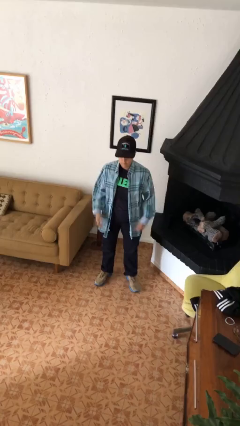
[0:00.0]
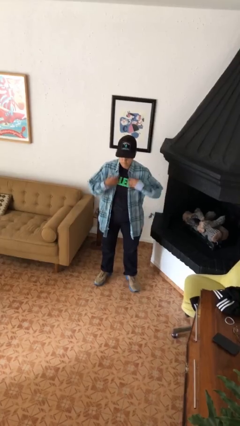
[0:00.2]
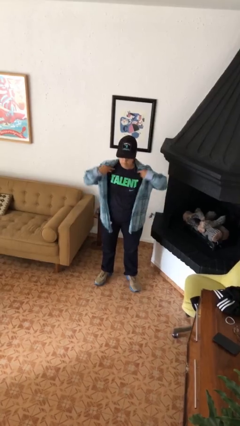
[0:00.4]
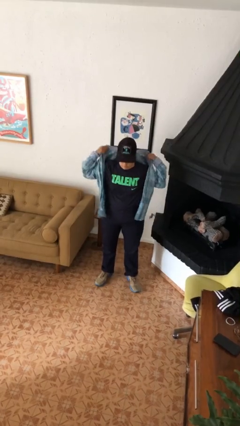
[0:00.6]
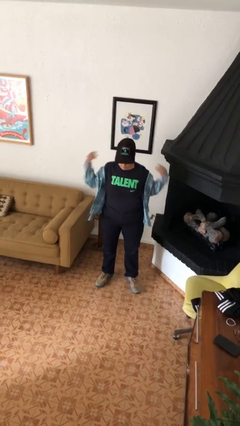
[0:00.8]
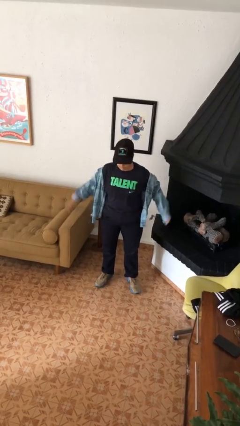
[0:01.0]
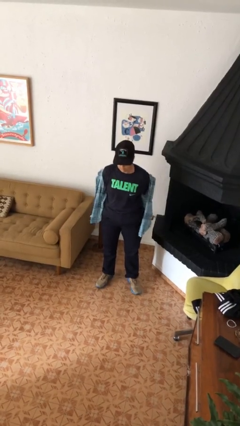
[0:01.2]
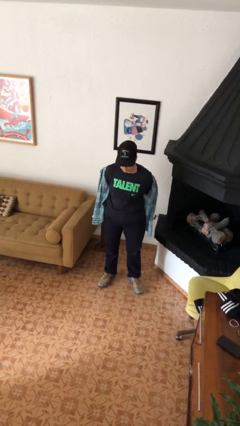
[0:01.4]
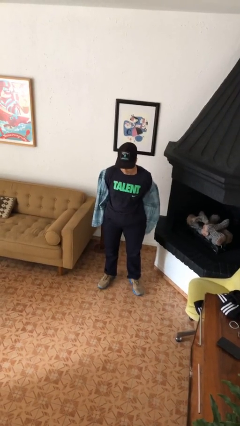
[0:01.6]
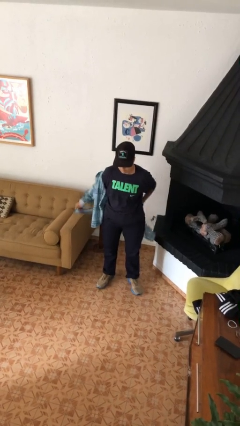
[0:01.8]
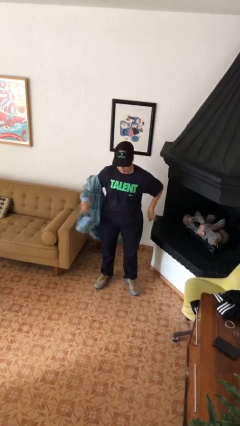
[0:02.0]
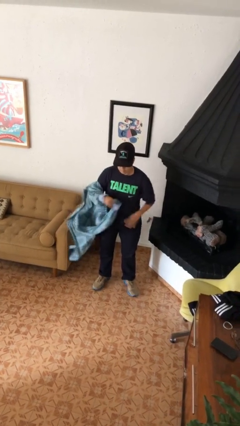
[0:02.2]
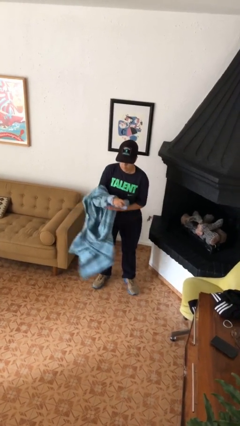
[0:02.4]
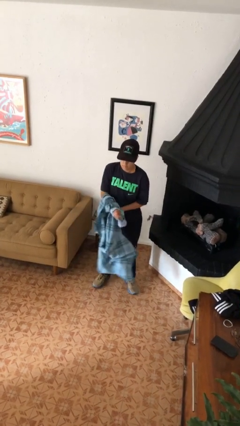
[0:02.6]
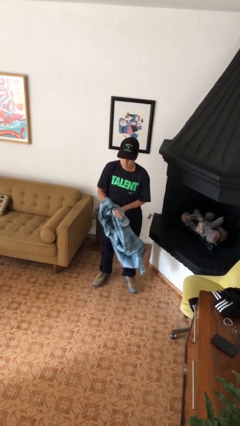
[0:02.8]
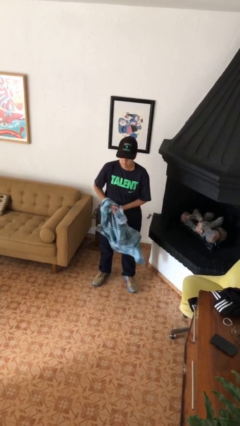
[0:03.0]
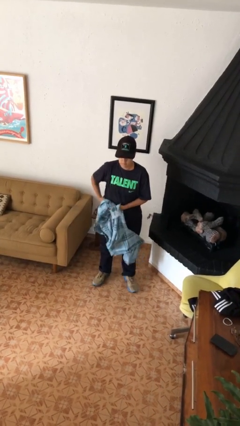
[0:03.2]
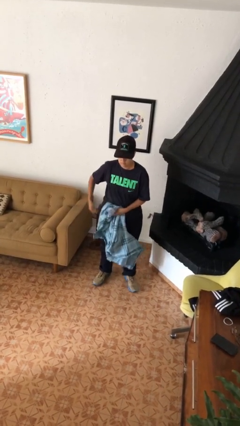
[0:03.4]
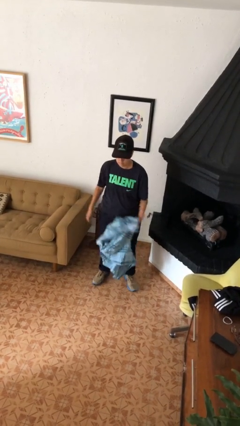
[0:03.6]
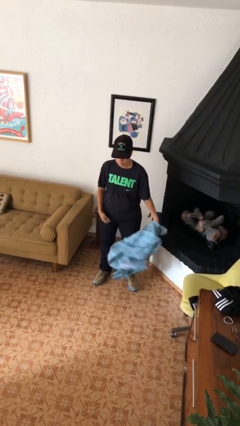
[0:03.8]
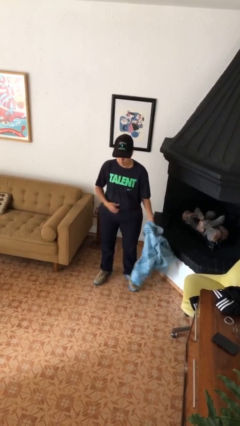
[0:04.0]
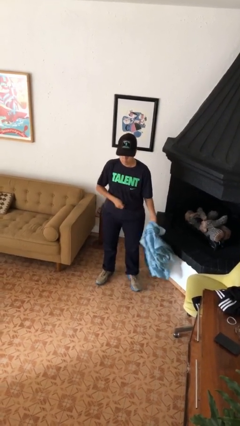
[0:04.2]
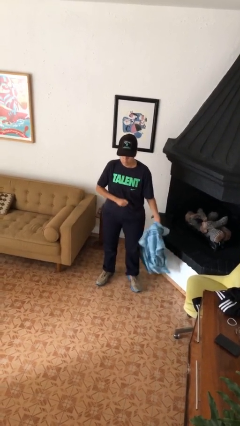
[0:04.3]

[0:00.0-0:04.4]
person takes off shirt

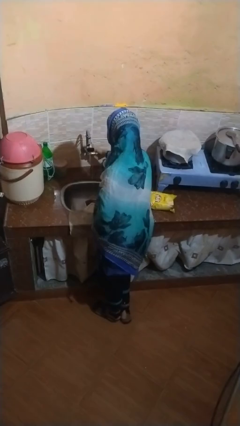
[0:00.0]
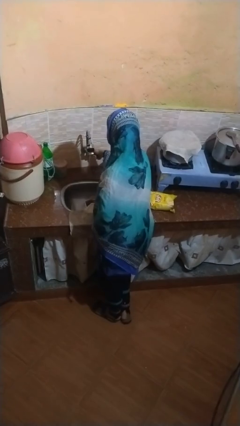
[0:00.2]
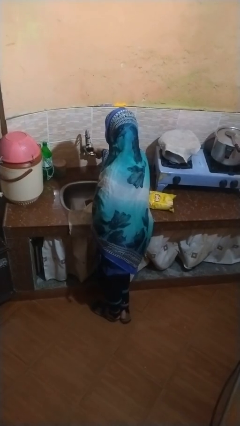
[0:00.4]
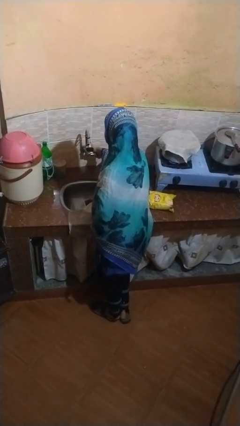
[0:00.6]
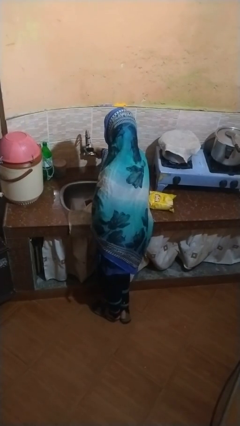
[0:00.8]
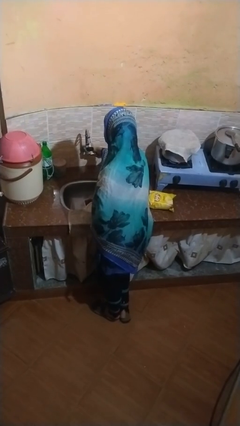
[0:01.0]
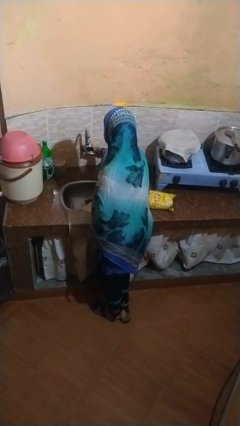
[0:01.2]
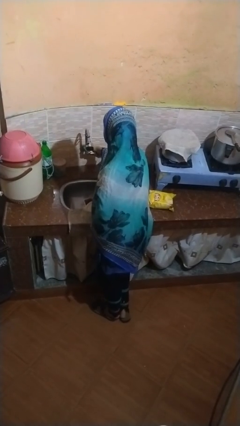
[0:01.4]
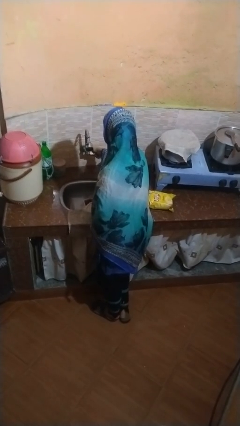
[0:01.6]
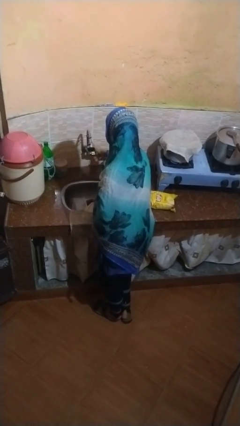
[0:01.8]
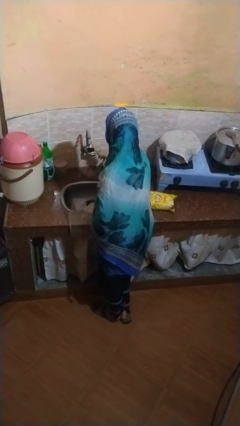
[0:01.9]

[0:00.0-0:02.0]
person turns off faucet

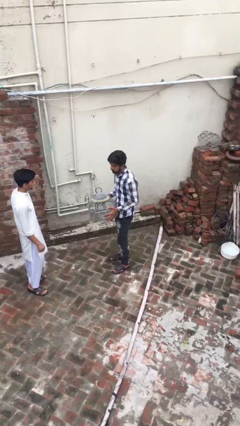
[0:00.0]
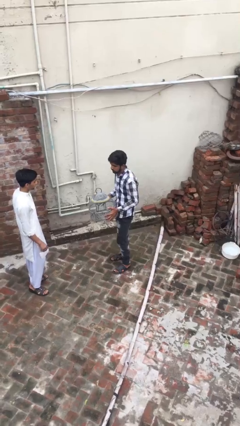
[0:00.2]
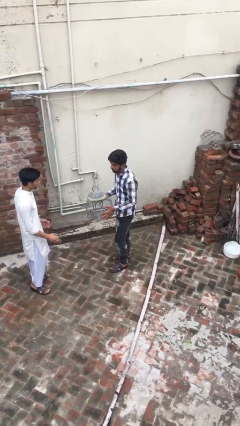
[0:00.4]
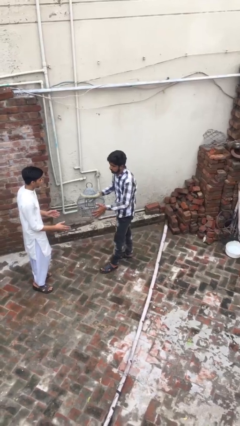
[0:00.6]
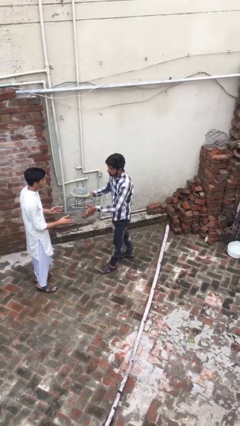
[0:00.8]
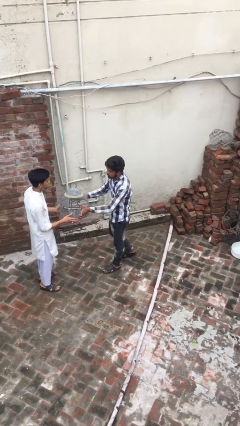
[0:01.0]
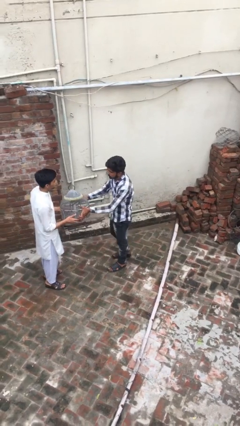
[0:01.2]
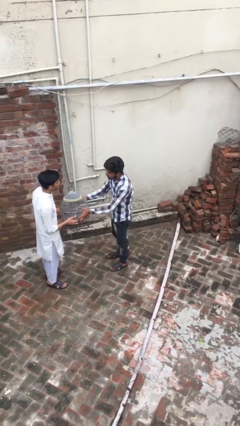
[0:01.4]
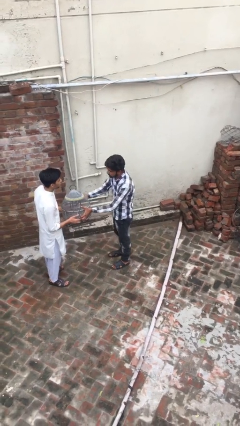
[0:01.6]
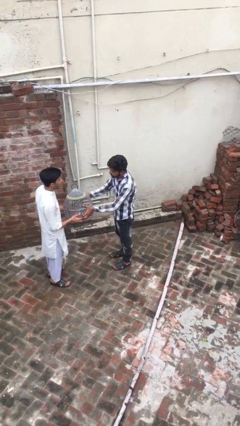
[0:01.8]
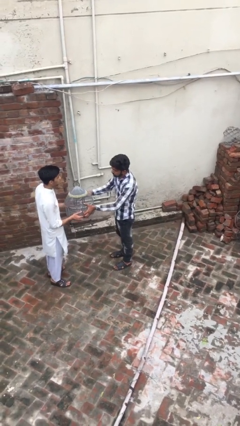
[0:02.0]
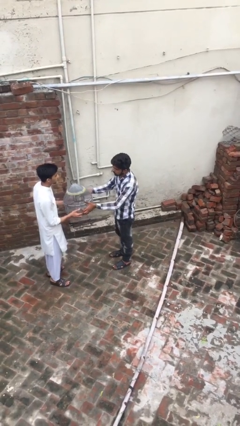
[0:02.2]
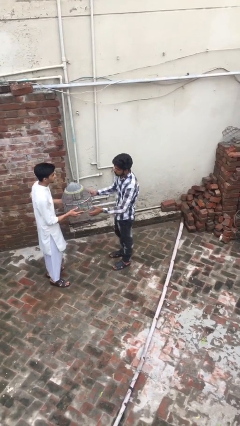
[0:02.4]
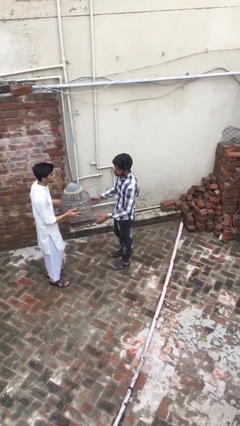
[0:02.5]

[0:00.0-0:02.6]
person transfers object to person

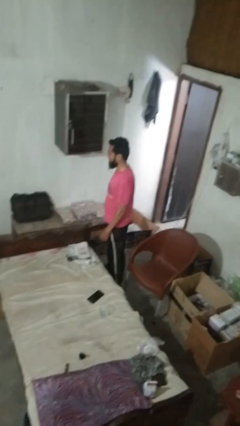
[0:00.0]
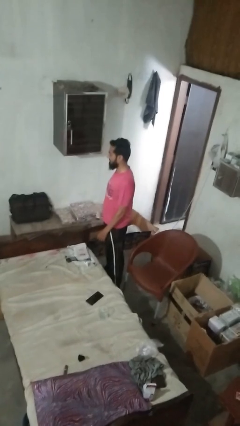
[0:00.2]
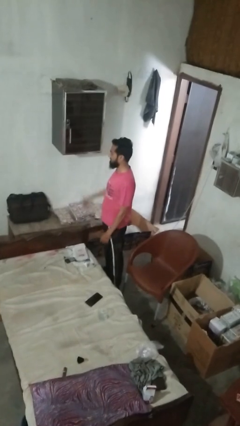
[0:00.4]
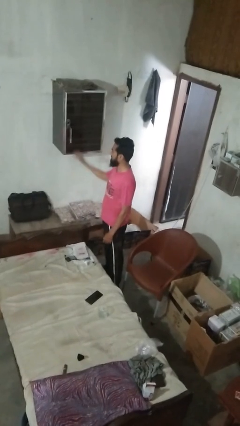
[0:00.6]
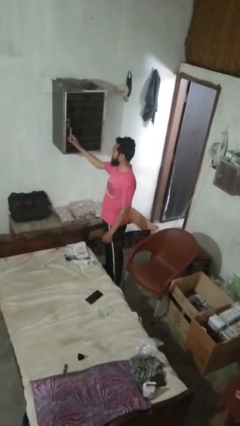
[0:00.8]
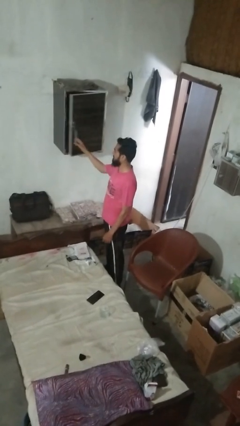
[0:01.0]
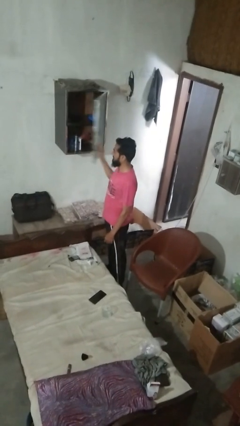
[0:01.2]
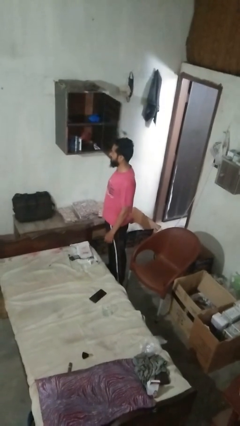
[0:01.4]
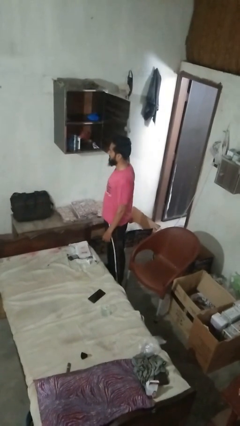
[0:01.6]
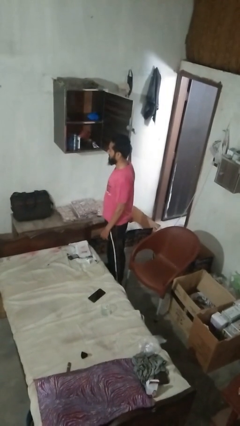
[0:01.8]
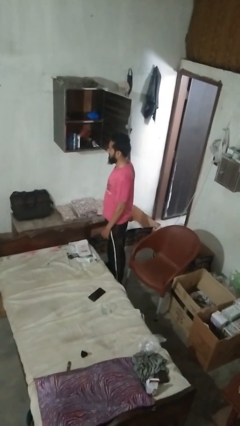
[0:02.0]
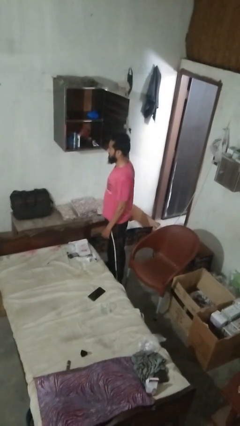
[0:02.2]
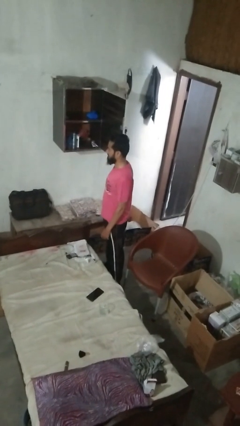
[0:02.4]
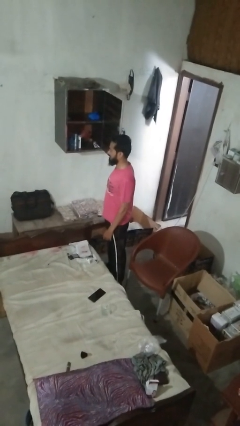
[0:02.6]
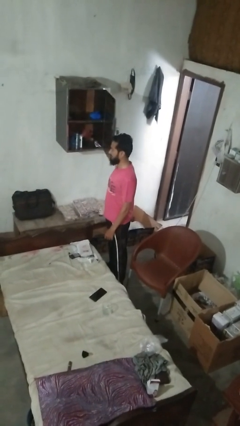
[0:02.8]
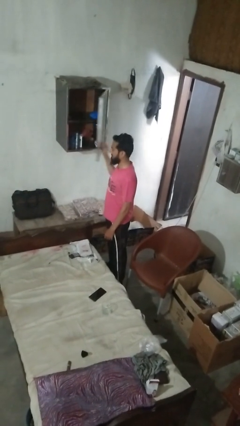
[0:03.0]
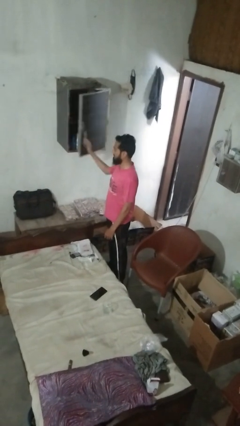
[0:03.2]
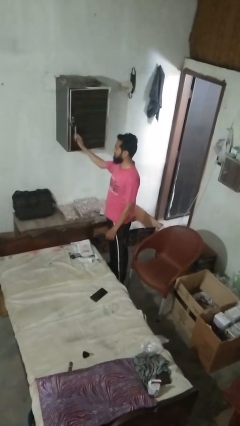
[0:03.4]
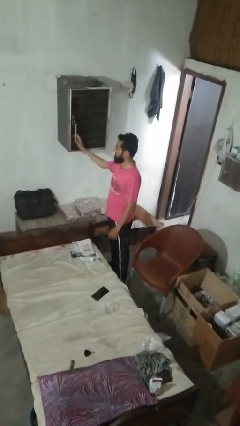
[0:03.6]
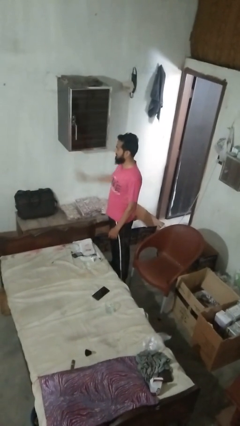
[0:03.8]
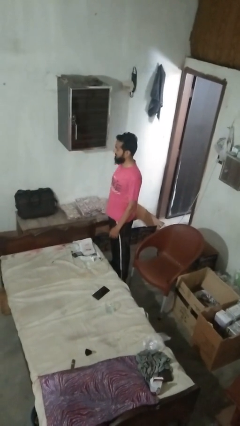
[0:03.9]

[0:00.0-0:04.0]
person opens closet door

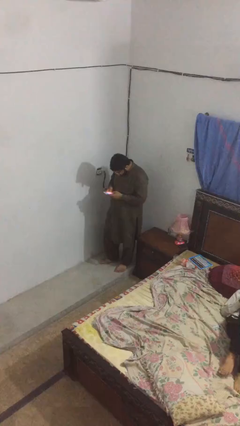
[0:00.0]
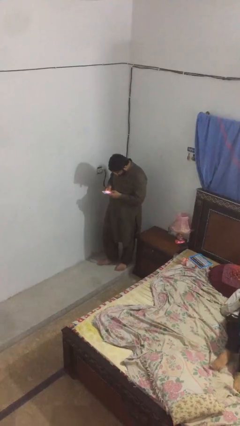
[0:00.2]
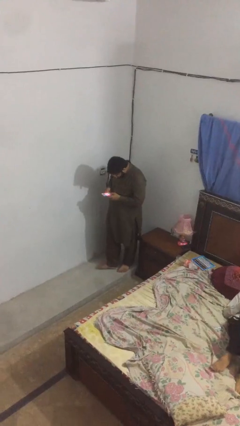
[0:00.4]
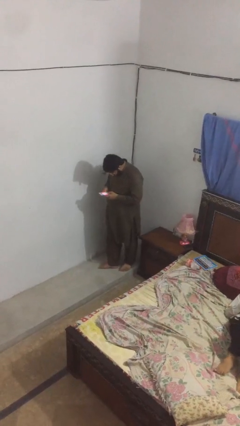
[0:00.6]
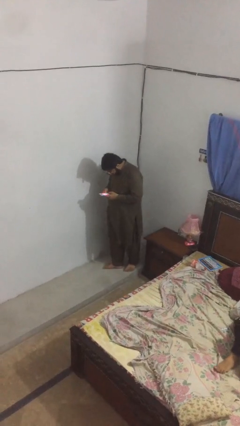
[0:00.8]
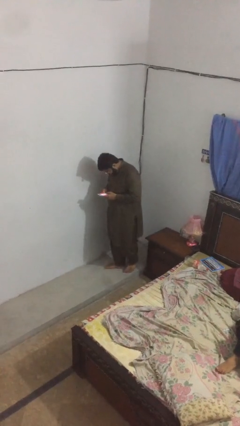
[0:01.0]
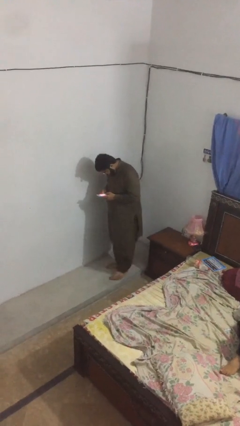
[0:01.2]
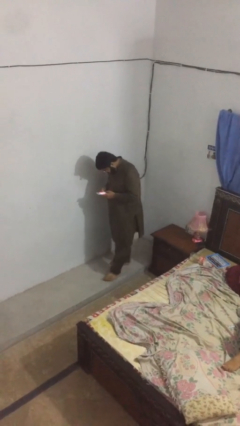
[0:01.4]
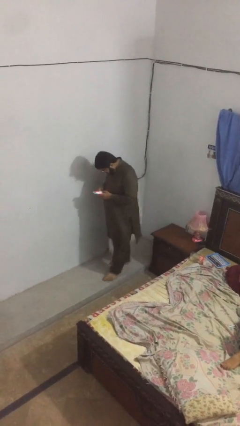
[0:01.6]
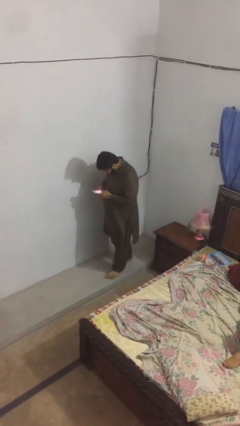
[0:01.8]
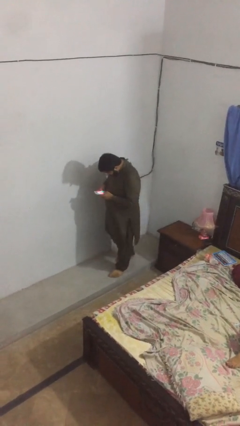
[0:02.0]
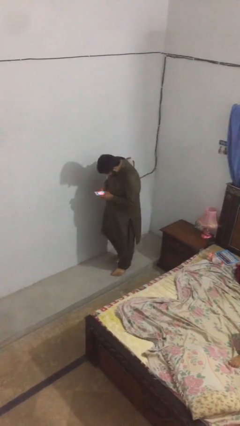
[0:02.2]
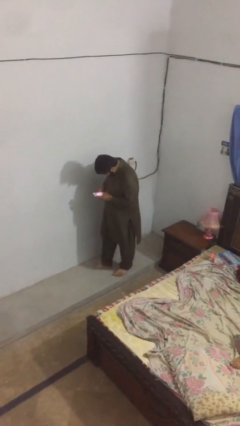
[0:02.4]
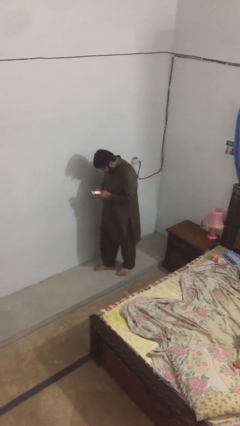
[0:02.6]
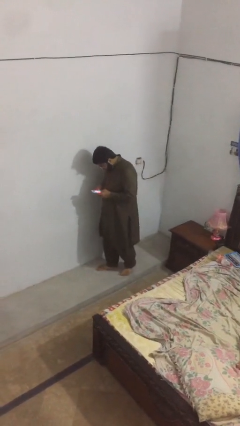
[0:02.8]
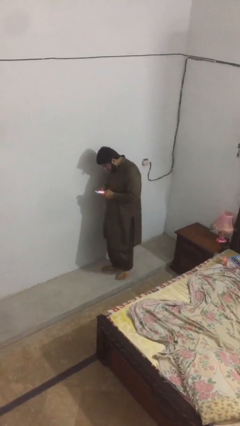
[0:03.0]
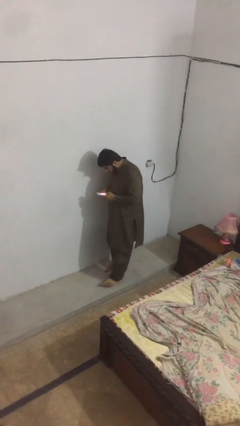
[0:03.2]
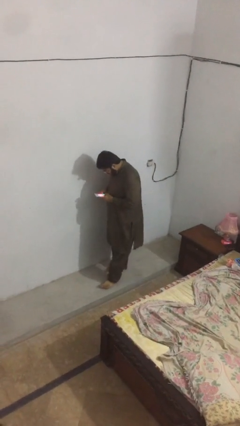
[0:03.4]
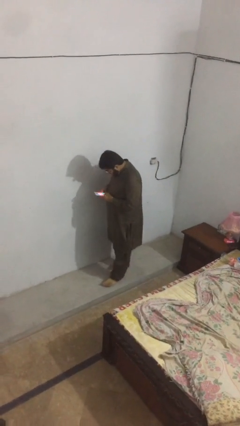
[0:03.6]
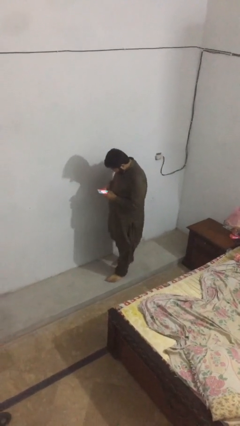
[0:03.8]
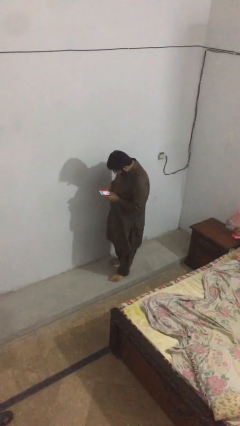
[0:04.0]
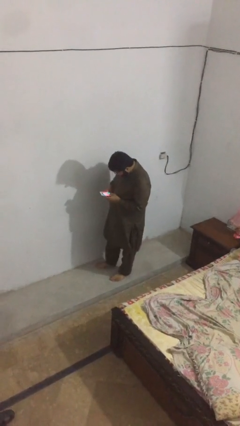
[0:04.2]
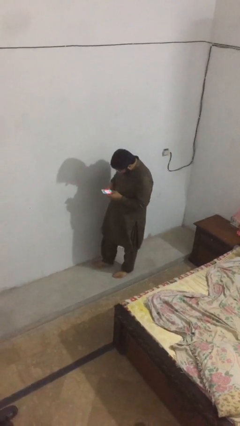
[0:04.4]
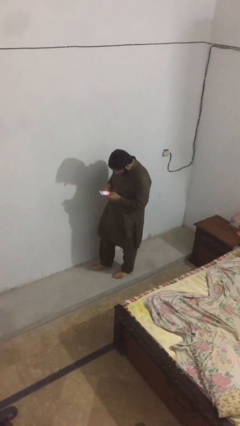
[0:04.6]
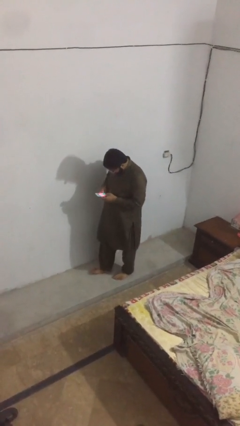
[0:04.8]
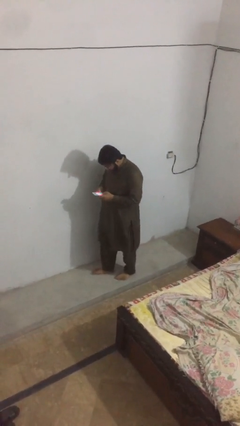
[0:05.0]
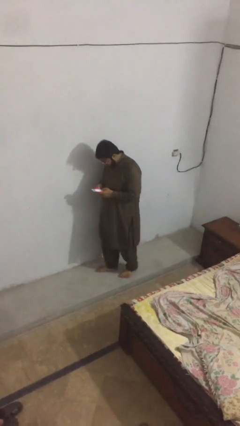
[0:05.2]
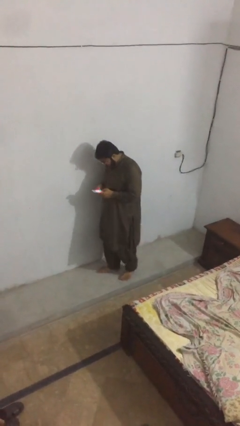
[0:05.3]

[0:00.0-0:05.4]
person texts on phone
